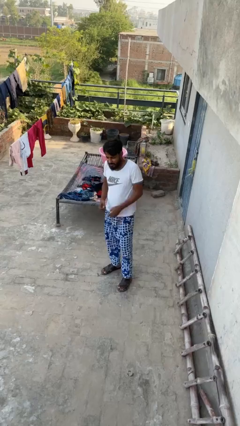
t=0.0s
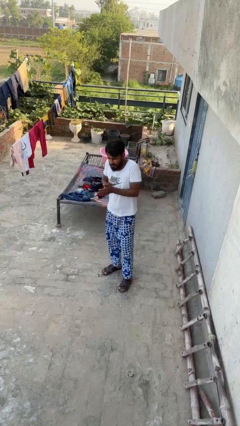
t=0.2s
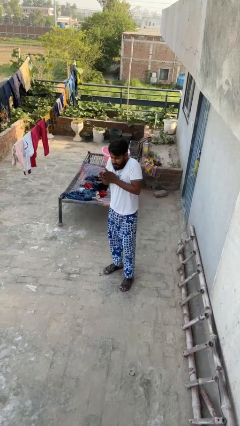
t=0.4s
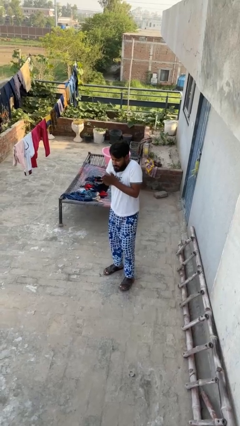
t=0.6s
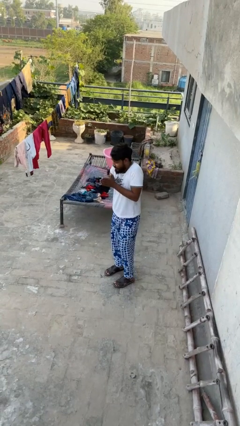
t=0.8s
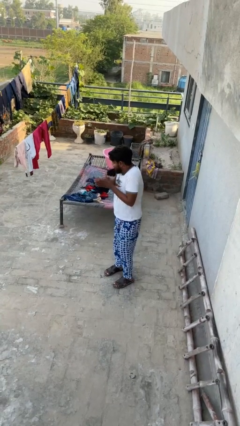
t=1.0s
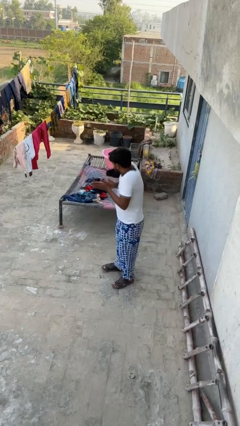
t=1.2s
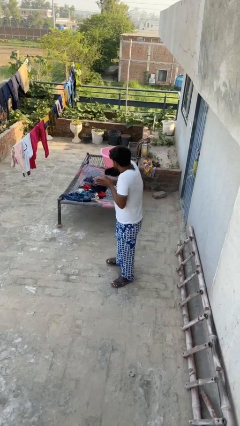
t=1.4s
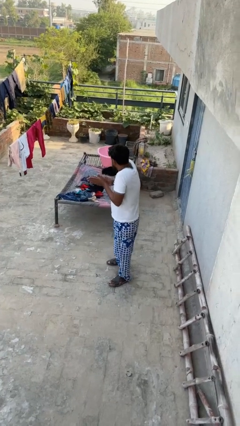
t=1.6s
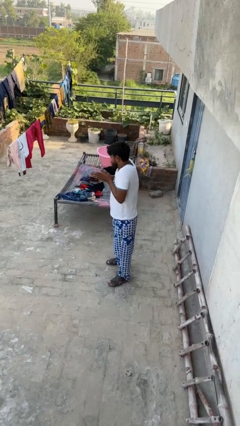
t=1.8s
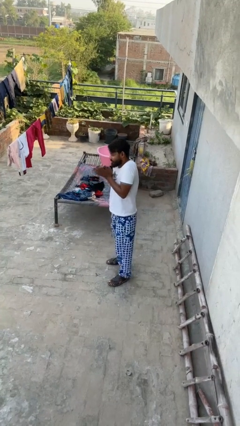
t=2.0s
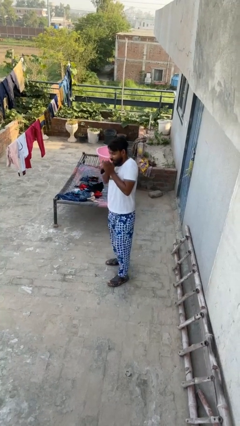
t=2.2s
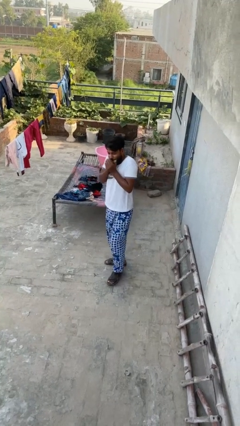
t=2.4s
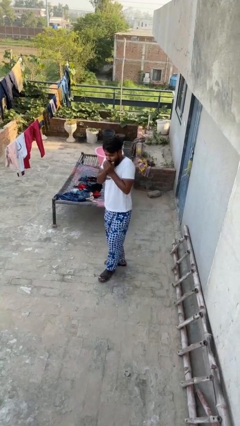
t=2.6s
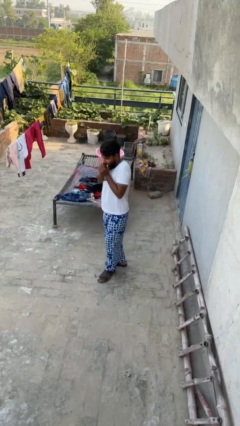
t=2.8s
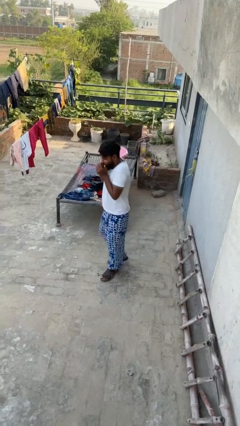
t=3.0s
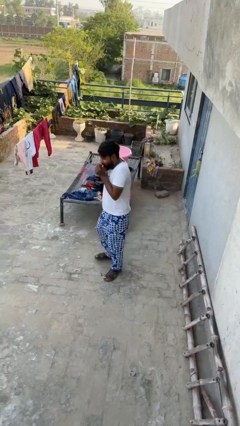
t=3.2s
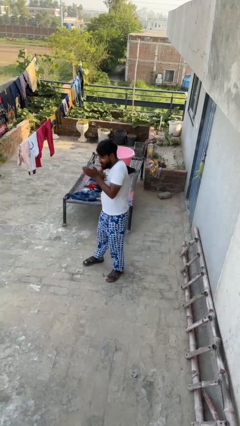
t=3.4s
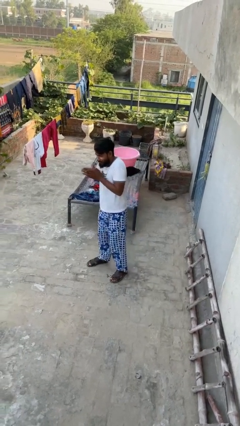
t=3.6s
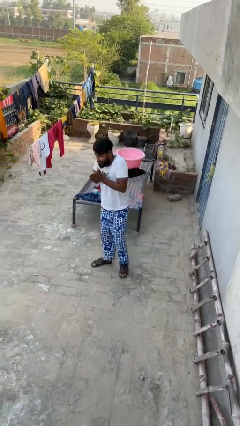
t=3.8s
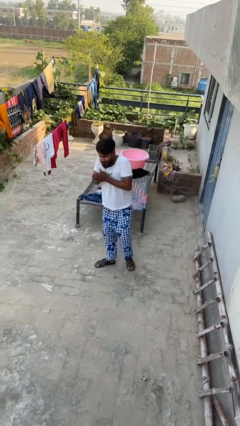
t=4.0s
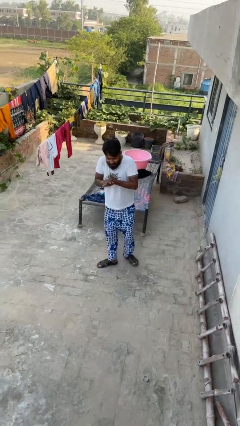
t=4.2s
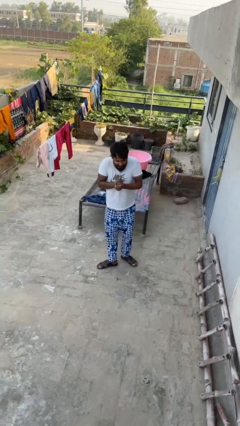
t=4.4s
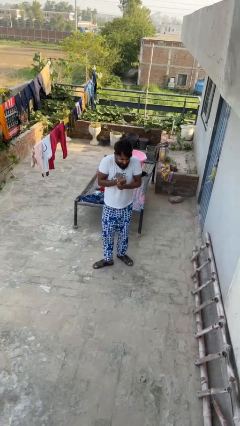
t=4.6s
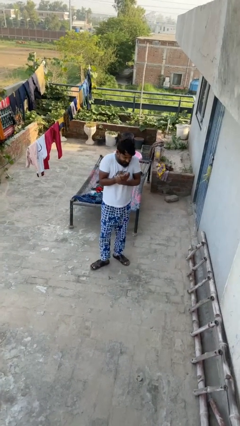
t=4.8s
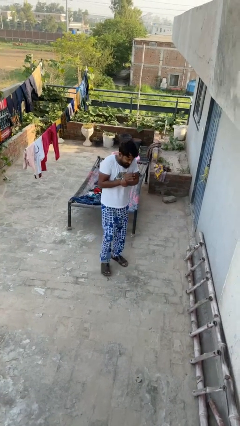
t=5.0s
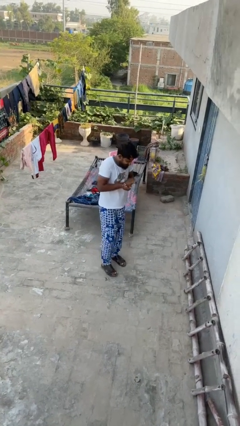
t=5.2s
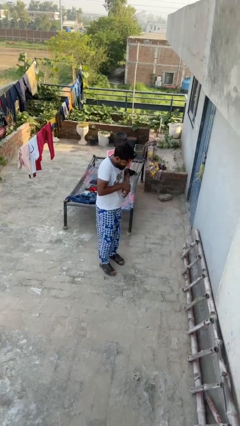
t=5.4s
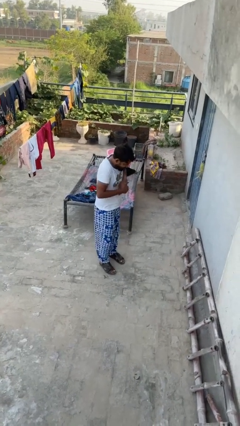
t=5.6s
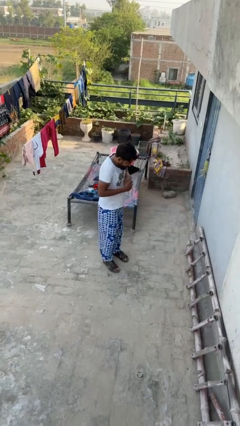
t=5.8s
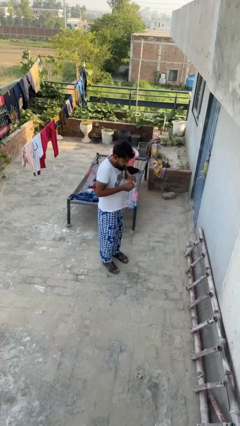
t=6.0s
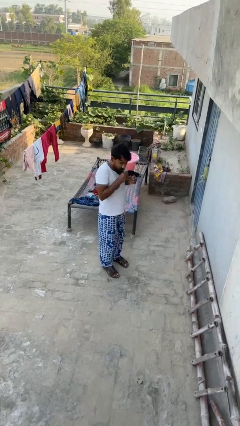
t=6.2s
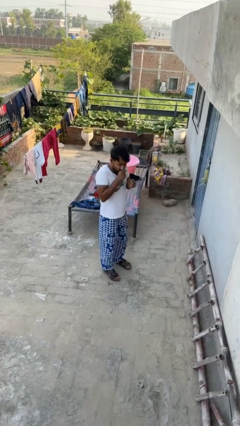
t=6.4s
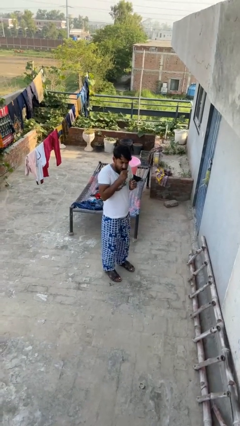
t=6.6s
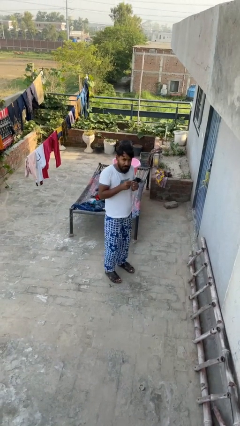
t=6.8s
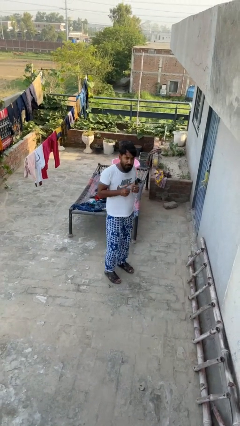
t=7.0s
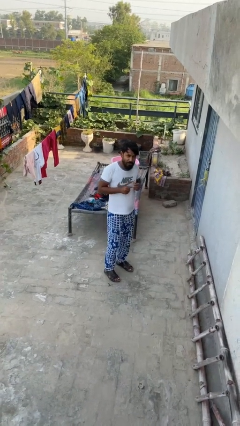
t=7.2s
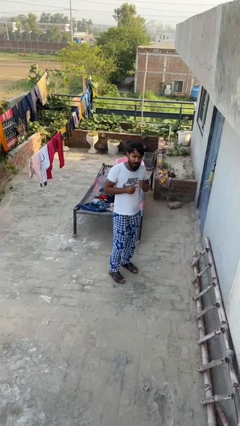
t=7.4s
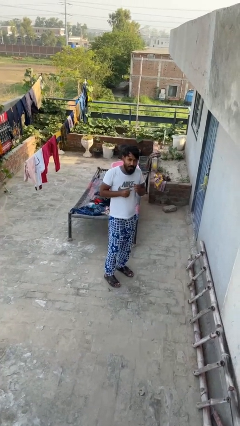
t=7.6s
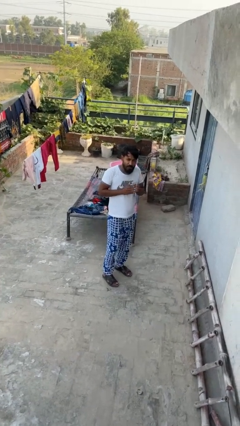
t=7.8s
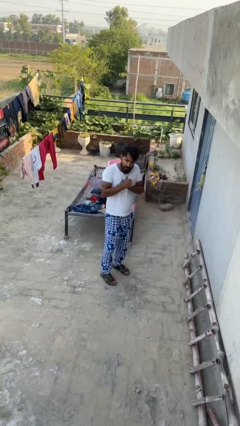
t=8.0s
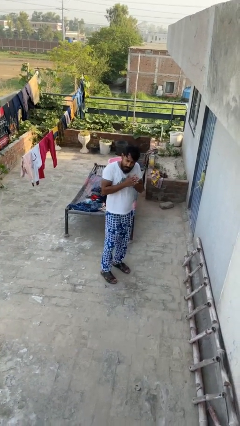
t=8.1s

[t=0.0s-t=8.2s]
person blows into hands

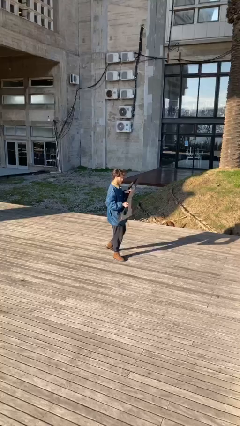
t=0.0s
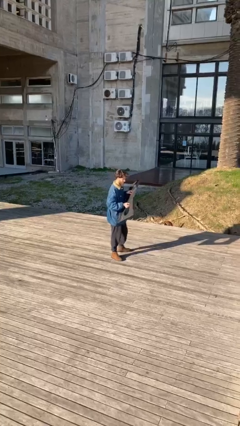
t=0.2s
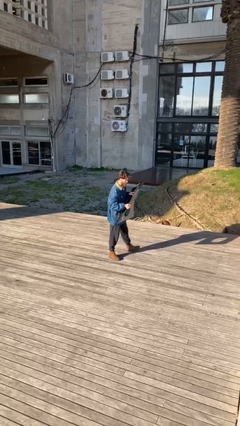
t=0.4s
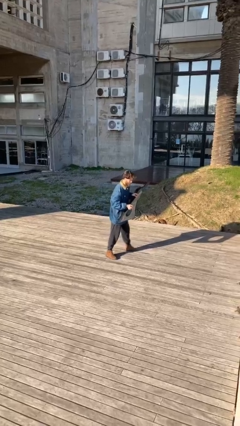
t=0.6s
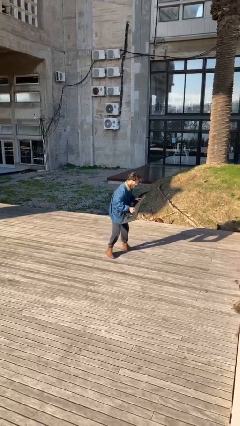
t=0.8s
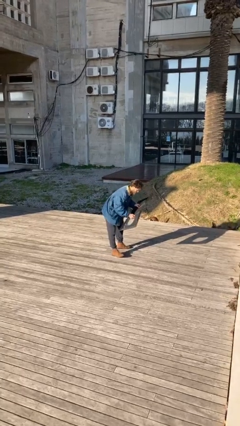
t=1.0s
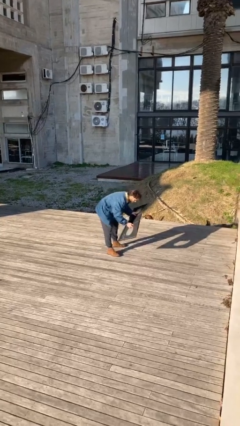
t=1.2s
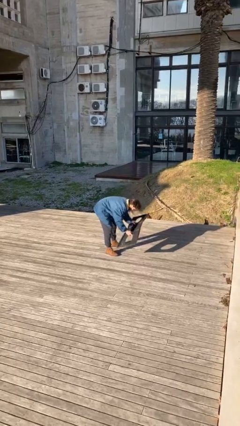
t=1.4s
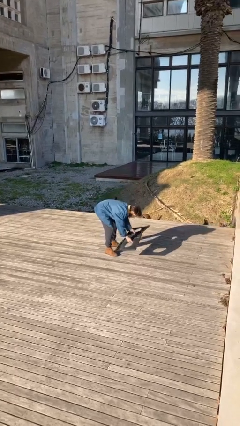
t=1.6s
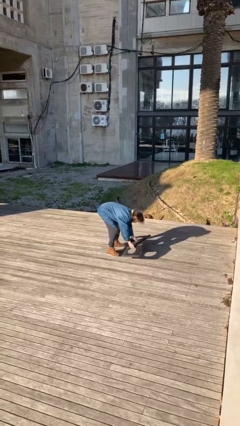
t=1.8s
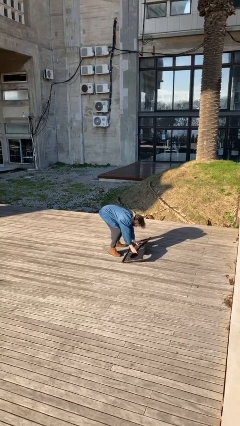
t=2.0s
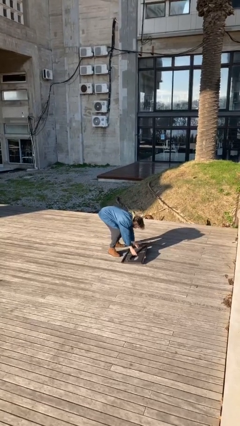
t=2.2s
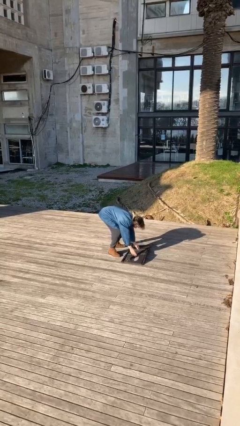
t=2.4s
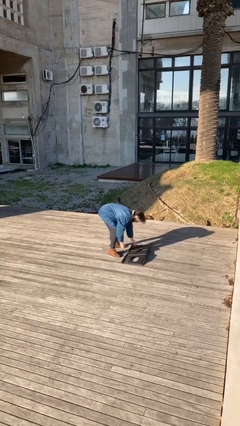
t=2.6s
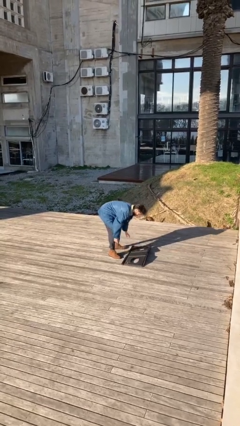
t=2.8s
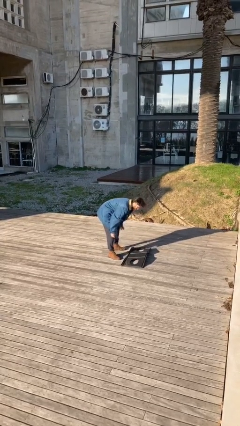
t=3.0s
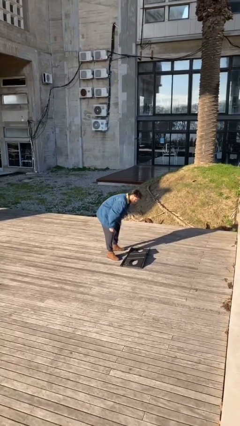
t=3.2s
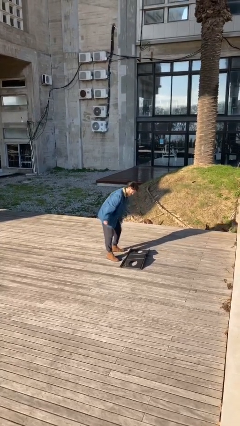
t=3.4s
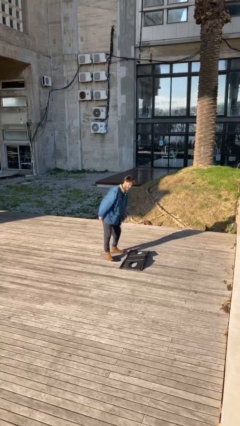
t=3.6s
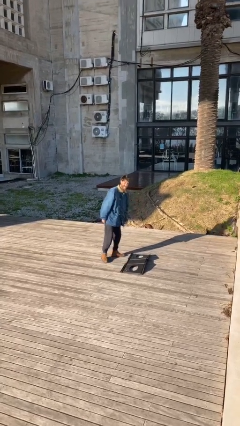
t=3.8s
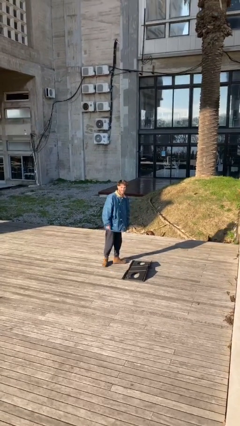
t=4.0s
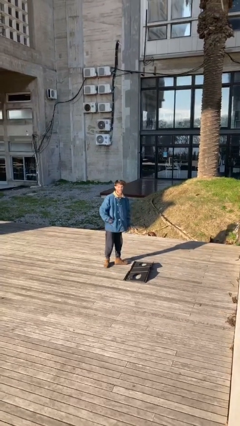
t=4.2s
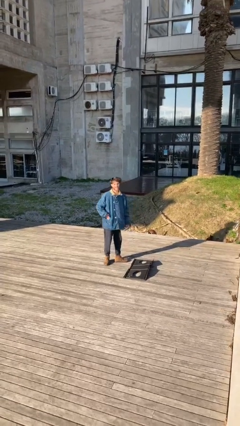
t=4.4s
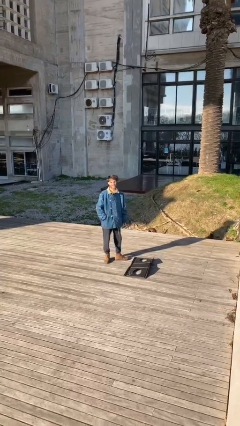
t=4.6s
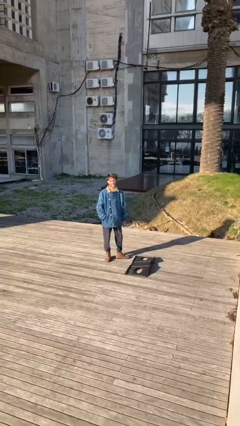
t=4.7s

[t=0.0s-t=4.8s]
person puts down object on floor

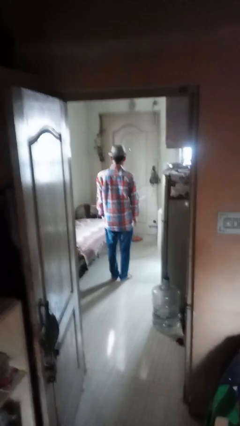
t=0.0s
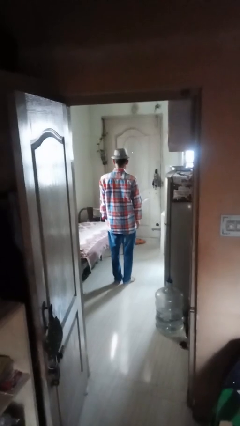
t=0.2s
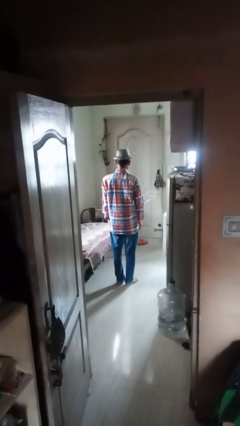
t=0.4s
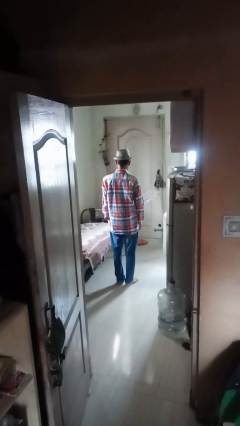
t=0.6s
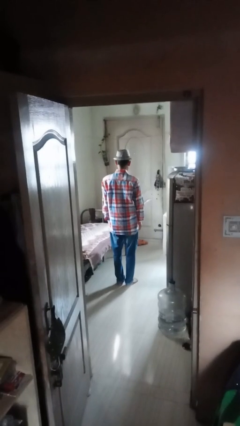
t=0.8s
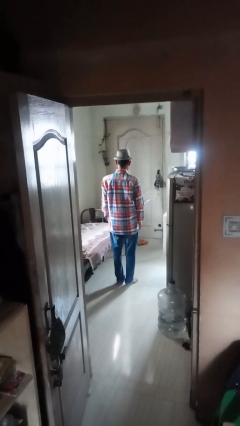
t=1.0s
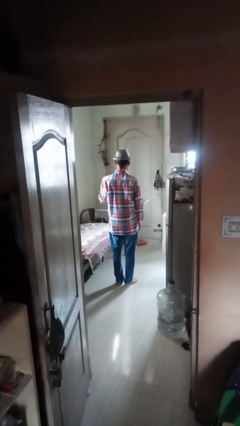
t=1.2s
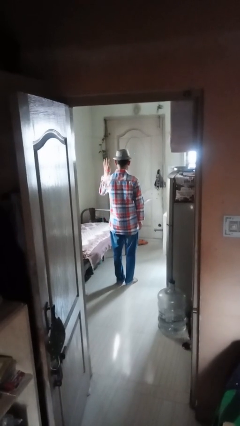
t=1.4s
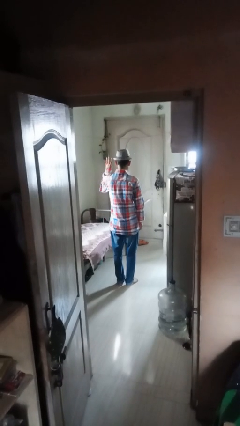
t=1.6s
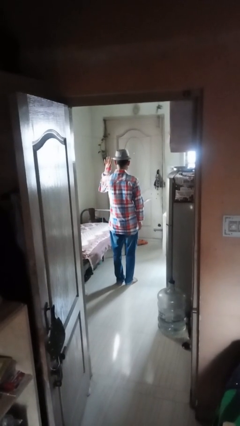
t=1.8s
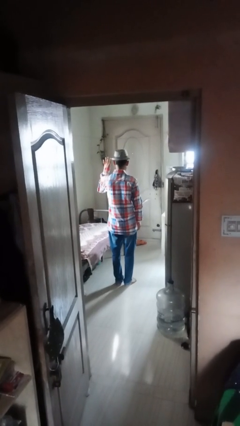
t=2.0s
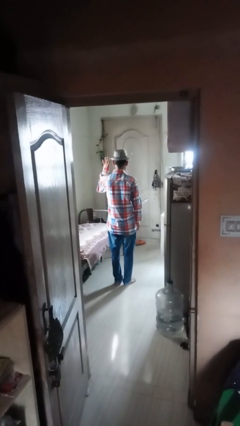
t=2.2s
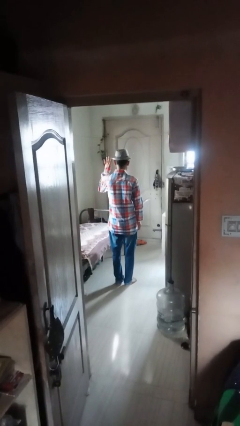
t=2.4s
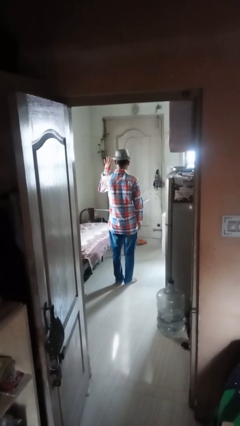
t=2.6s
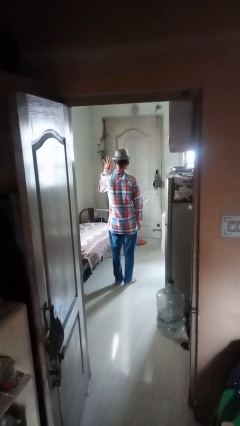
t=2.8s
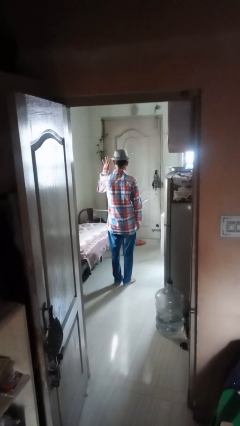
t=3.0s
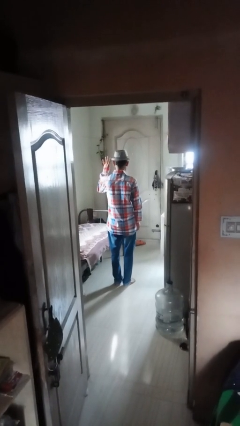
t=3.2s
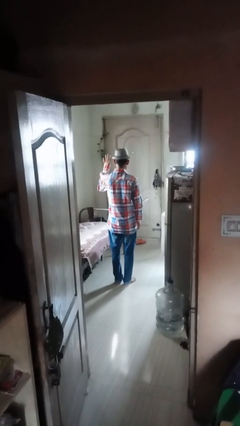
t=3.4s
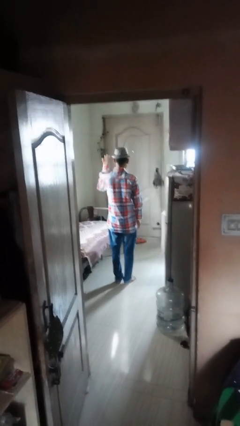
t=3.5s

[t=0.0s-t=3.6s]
person gestures number four

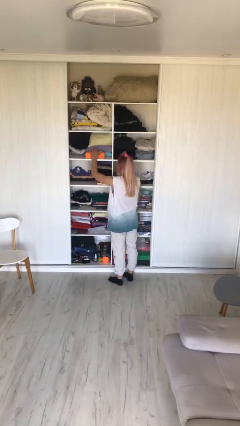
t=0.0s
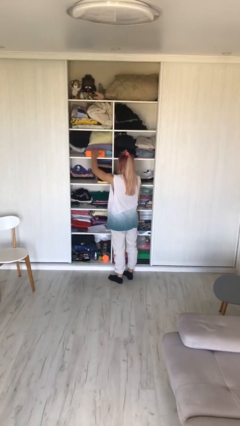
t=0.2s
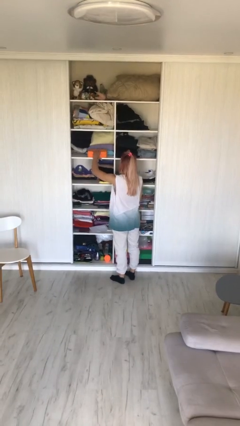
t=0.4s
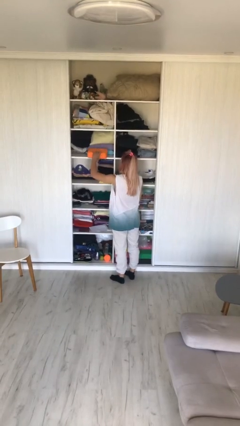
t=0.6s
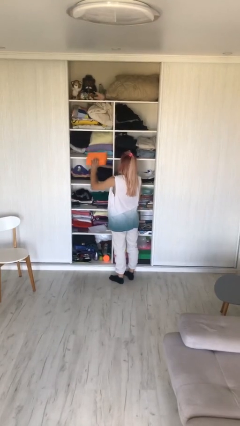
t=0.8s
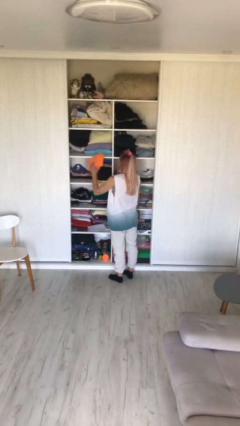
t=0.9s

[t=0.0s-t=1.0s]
person picks up object from shelf
